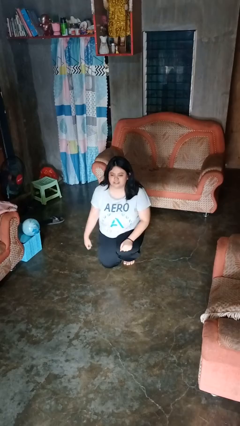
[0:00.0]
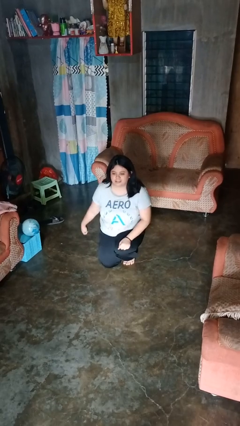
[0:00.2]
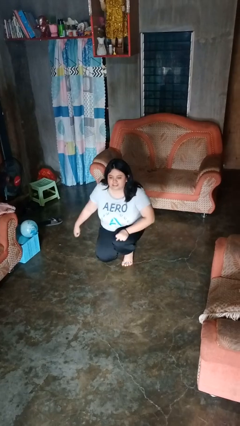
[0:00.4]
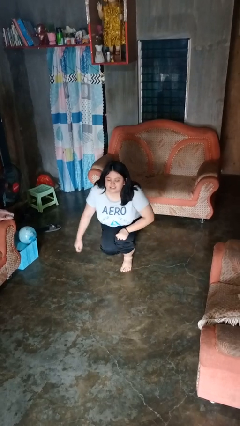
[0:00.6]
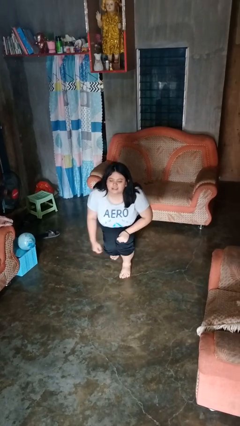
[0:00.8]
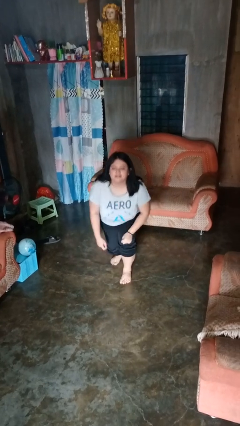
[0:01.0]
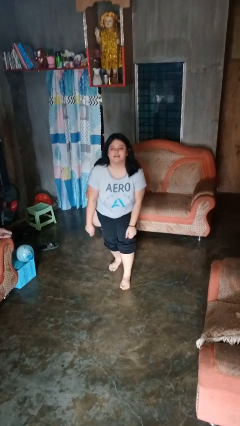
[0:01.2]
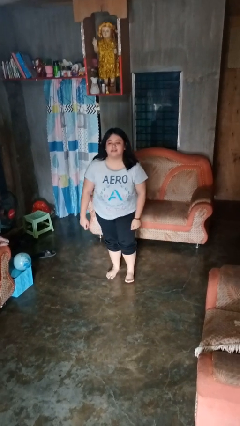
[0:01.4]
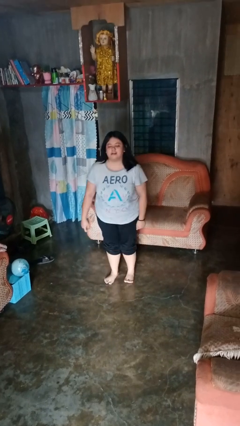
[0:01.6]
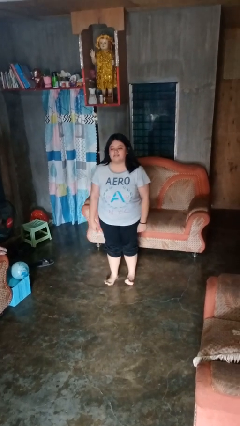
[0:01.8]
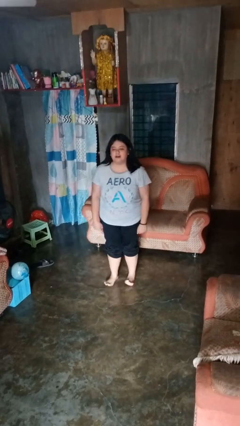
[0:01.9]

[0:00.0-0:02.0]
person stands up from floor

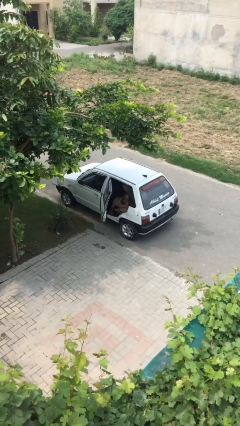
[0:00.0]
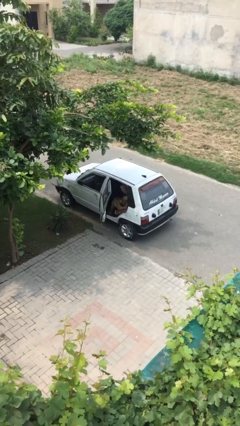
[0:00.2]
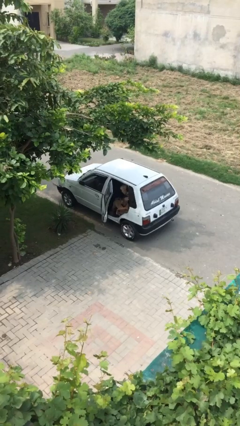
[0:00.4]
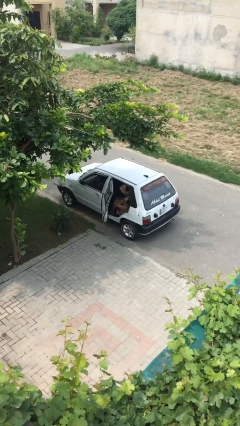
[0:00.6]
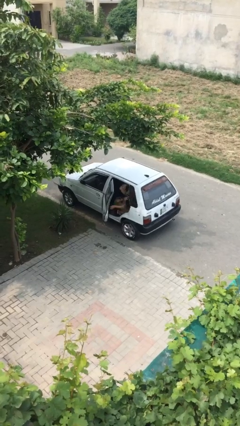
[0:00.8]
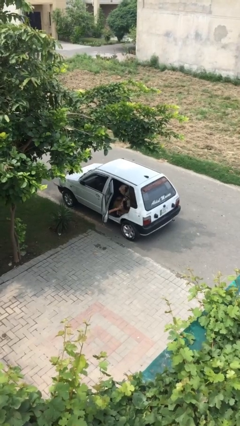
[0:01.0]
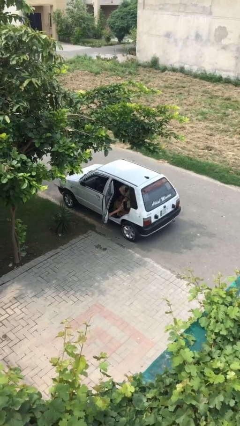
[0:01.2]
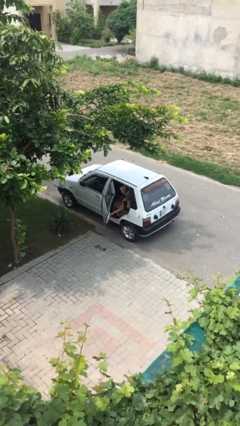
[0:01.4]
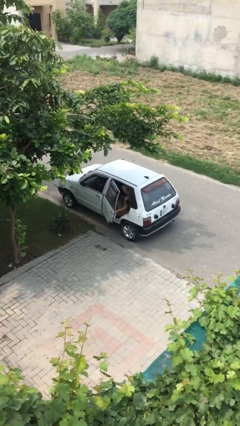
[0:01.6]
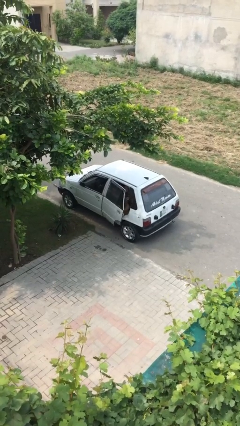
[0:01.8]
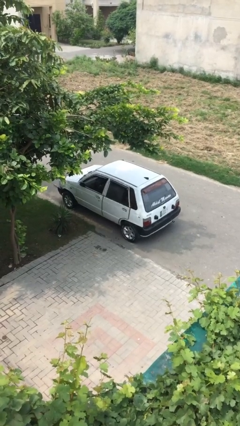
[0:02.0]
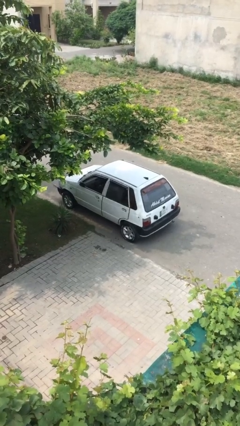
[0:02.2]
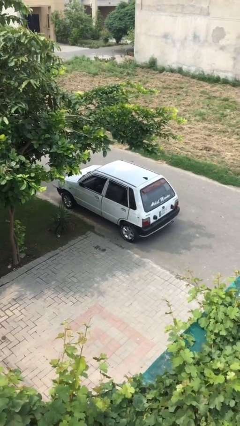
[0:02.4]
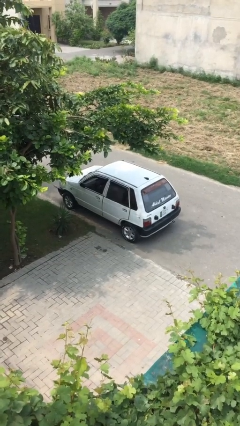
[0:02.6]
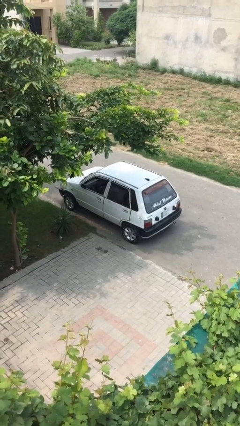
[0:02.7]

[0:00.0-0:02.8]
person closes car door

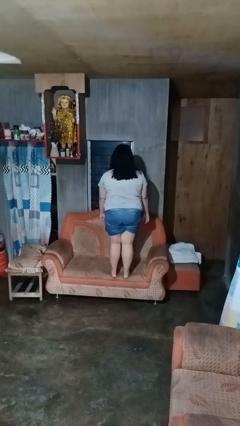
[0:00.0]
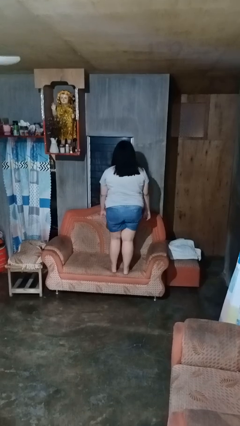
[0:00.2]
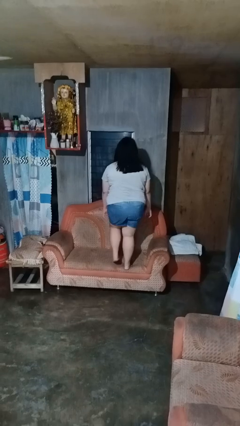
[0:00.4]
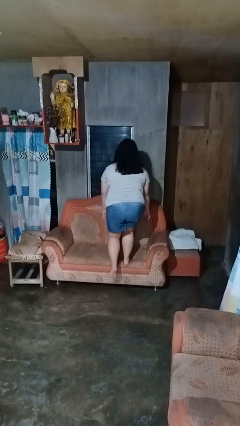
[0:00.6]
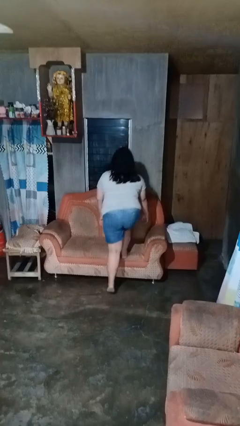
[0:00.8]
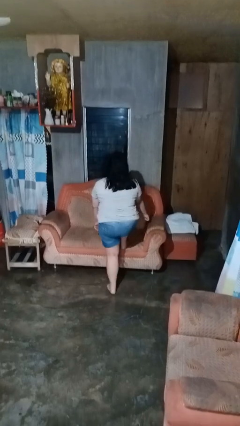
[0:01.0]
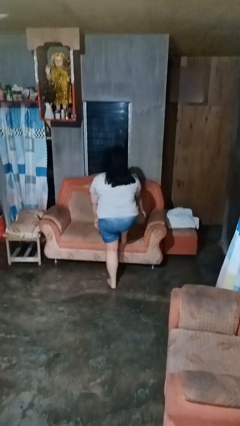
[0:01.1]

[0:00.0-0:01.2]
person climbs off couch

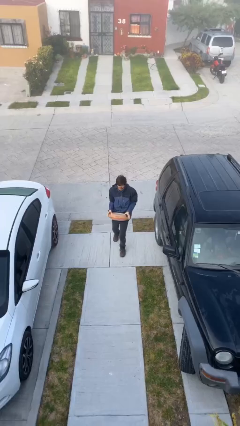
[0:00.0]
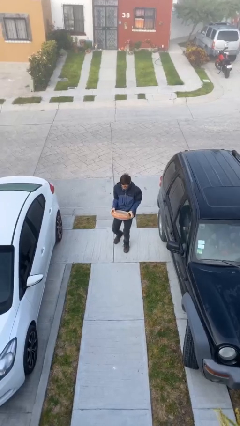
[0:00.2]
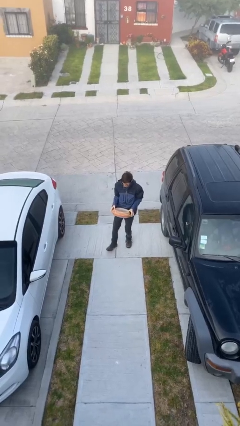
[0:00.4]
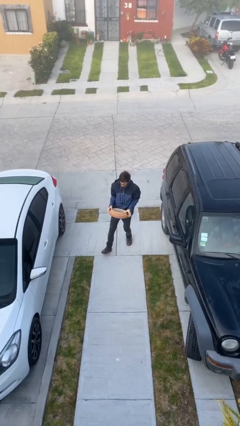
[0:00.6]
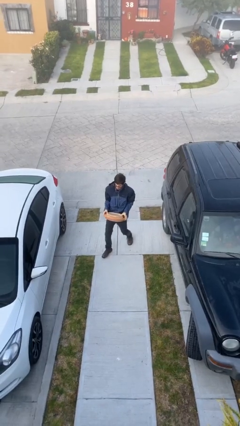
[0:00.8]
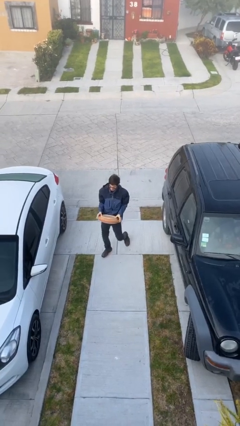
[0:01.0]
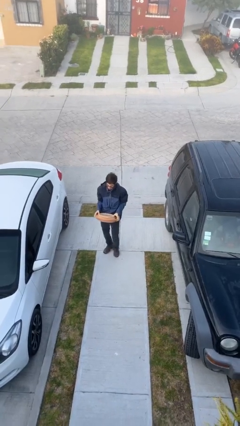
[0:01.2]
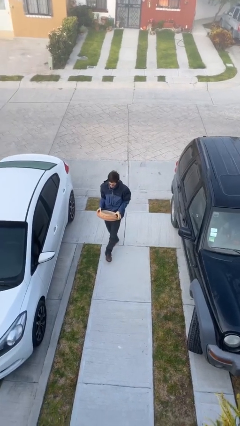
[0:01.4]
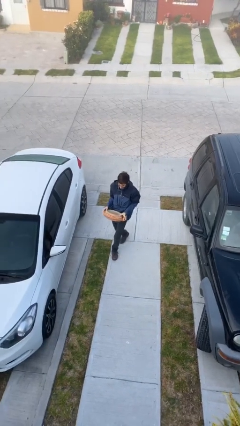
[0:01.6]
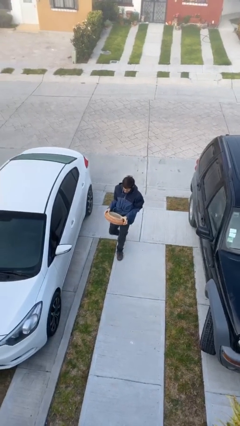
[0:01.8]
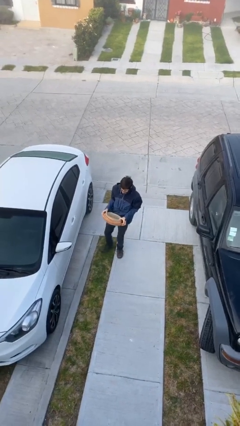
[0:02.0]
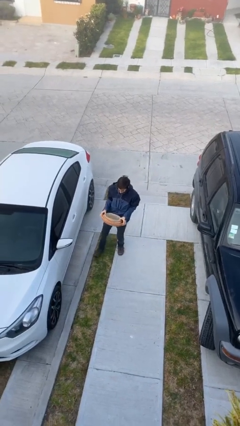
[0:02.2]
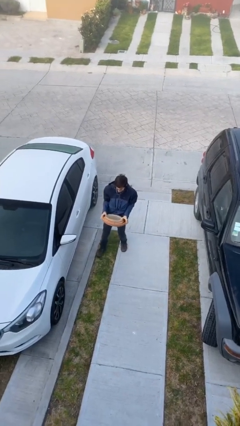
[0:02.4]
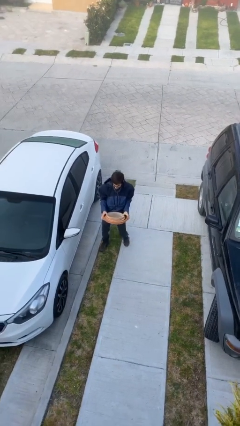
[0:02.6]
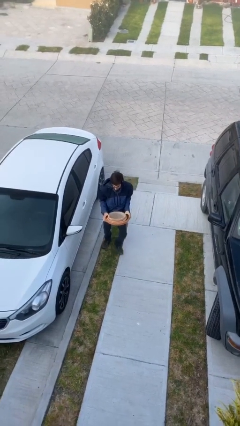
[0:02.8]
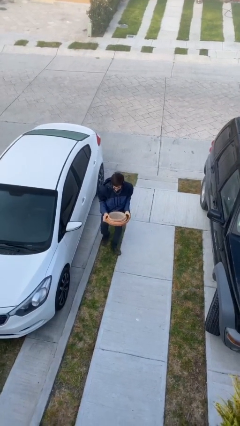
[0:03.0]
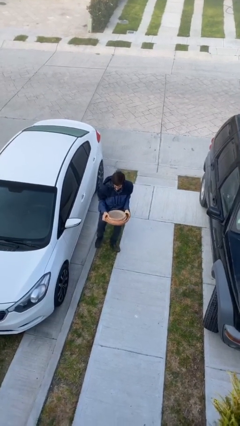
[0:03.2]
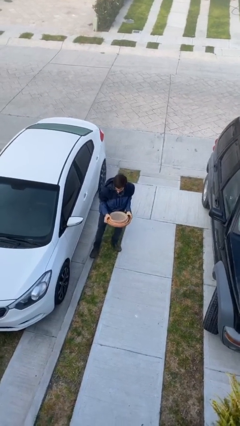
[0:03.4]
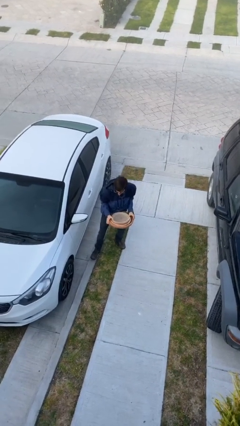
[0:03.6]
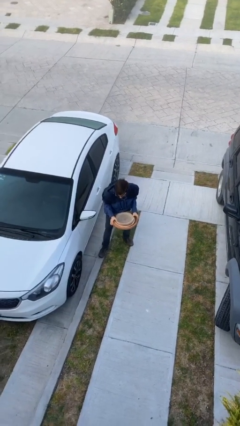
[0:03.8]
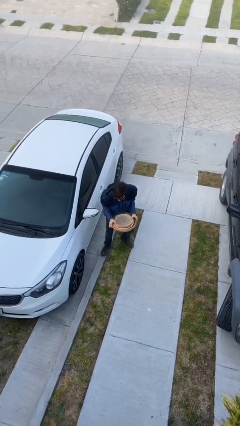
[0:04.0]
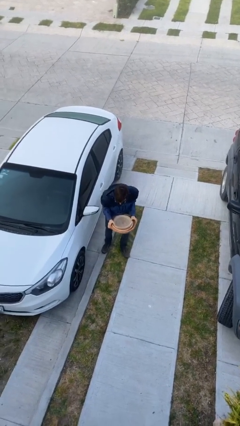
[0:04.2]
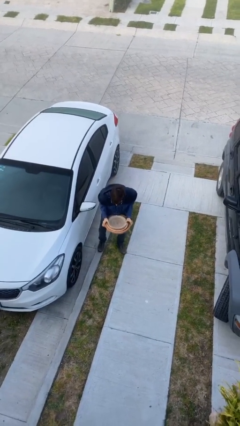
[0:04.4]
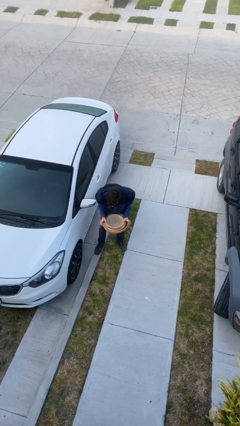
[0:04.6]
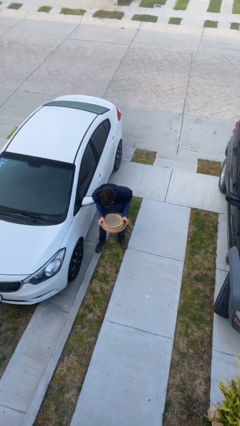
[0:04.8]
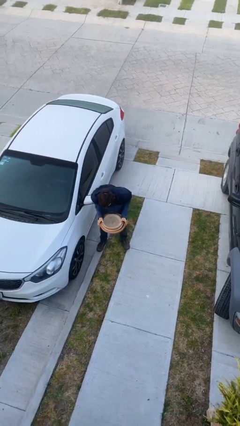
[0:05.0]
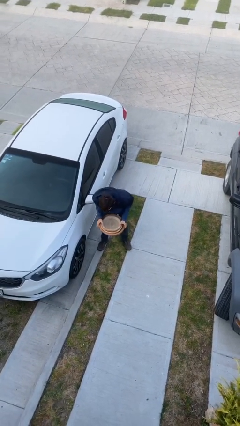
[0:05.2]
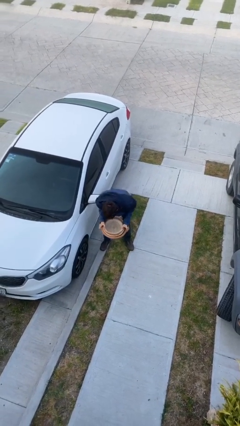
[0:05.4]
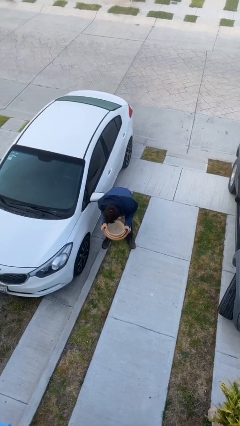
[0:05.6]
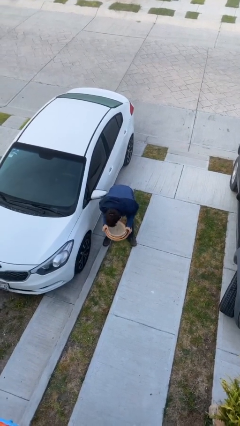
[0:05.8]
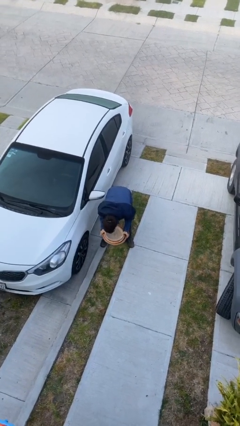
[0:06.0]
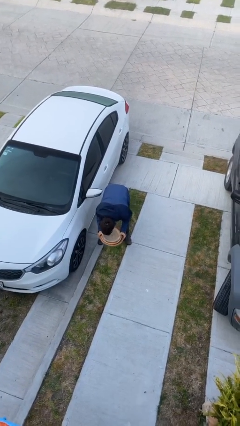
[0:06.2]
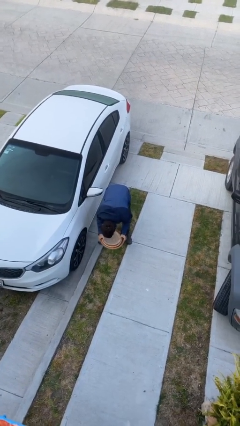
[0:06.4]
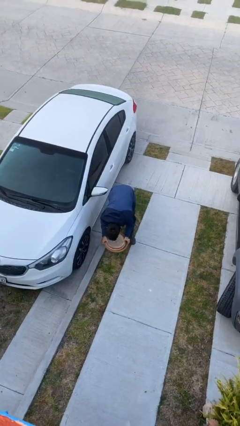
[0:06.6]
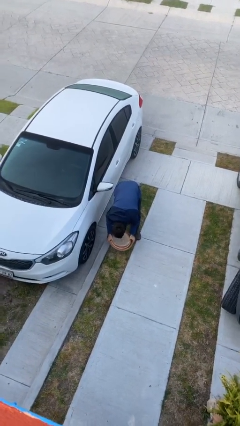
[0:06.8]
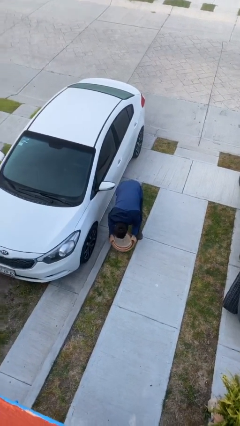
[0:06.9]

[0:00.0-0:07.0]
person carries heavy object

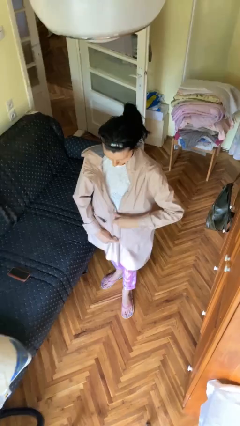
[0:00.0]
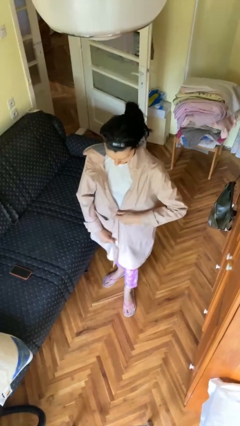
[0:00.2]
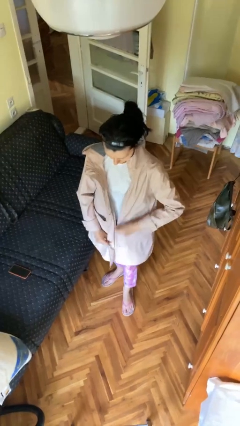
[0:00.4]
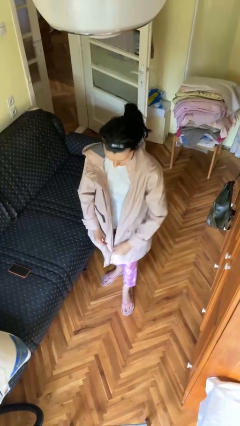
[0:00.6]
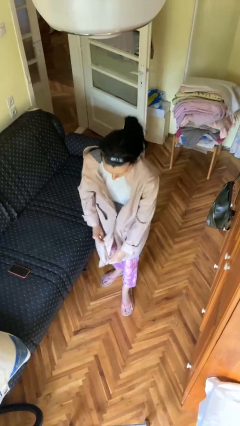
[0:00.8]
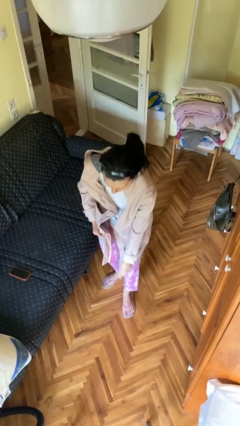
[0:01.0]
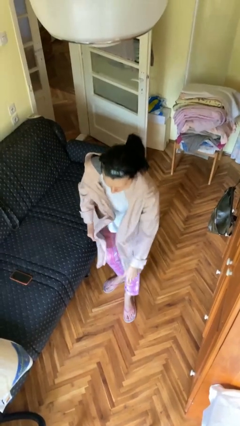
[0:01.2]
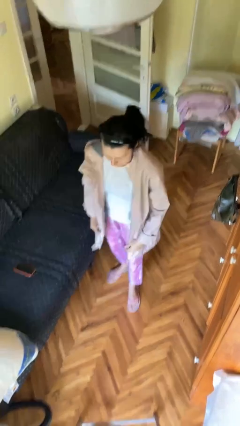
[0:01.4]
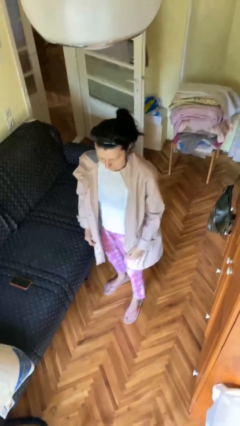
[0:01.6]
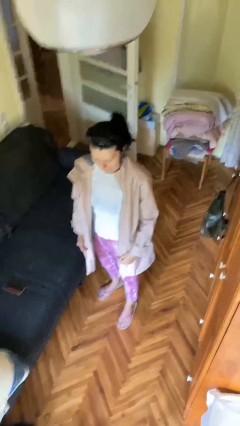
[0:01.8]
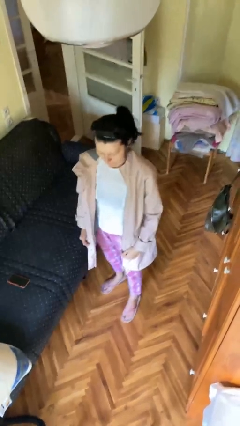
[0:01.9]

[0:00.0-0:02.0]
person unzips jacket

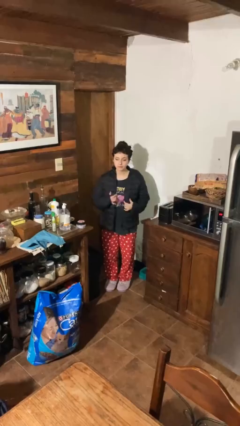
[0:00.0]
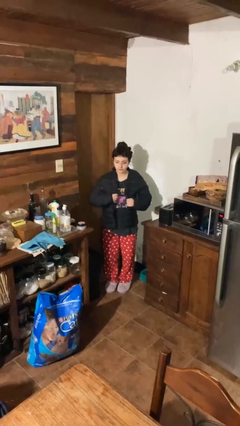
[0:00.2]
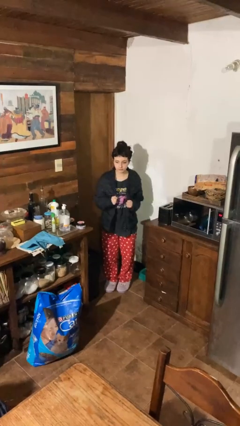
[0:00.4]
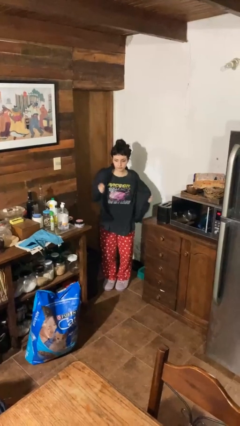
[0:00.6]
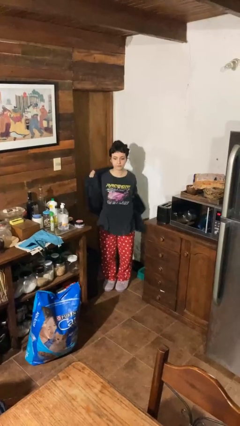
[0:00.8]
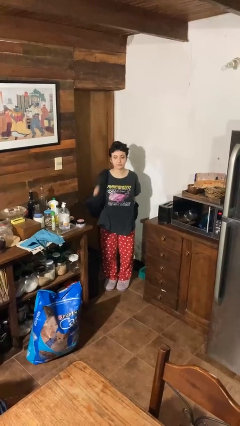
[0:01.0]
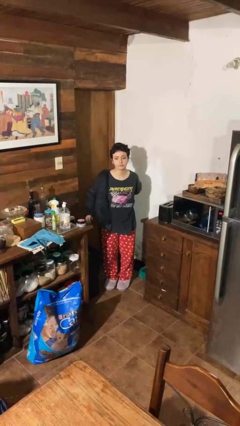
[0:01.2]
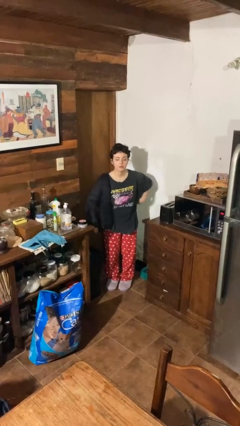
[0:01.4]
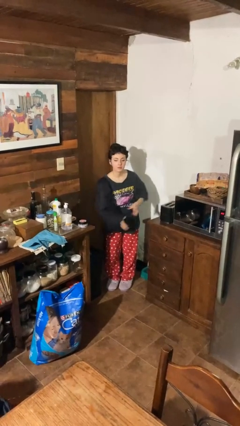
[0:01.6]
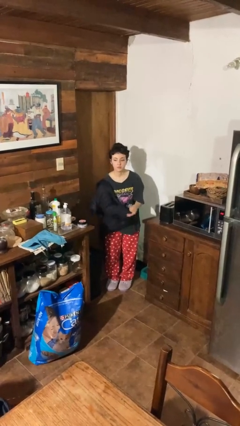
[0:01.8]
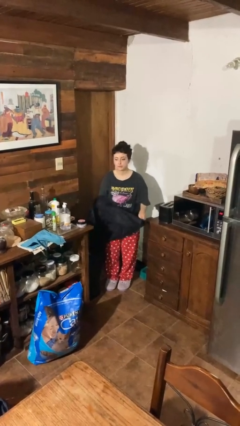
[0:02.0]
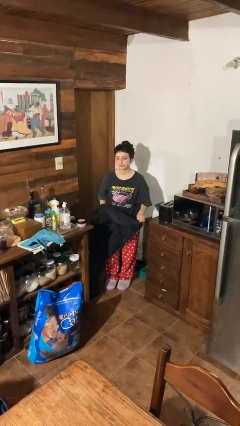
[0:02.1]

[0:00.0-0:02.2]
person takes off jacket

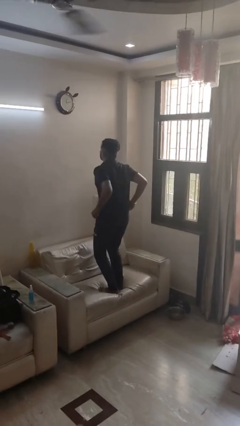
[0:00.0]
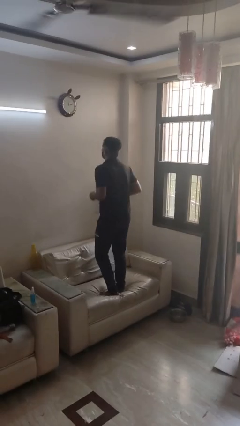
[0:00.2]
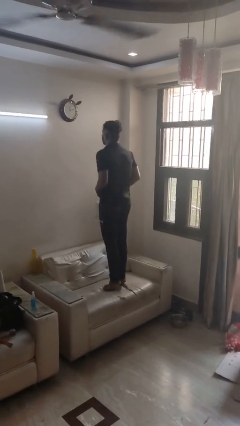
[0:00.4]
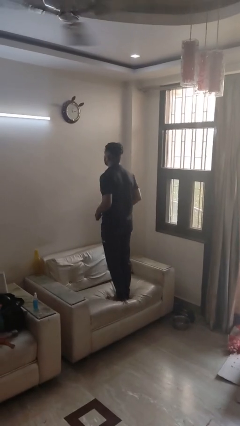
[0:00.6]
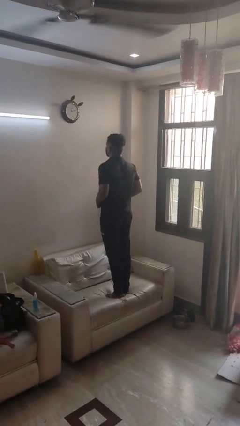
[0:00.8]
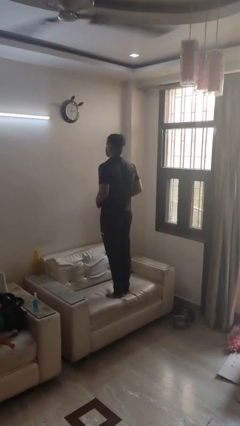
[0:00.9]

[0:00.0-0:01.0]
person jumps on couch
